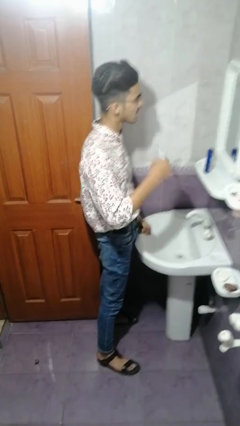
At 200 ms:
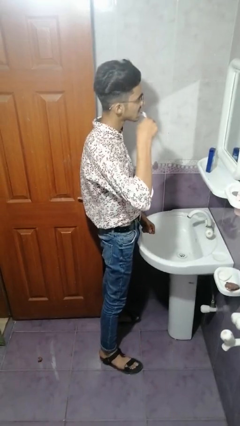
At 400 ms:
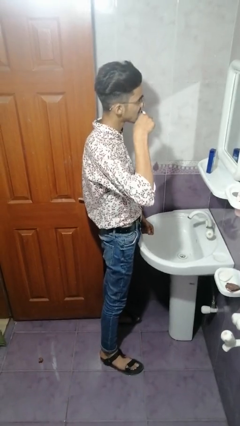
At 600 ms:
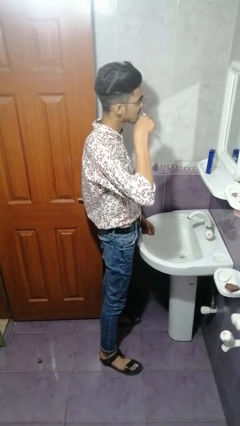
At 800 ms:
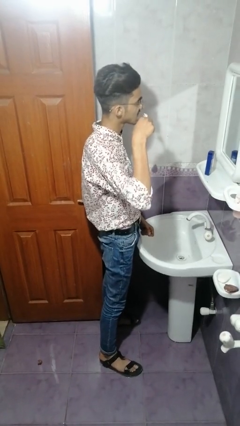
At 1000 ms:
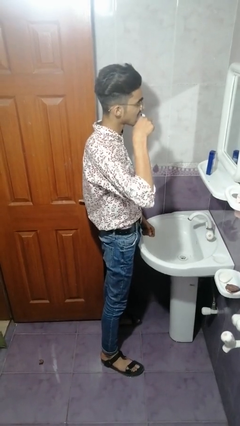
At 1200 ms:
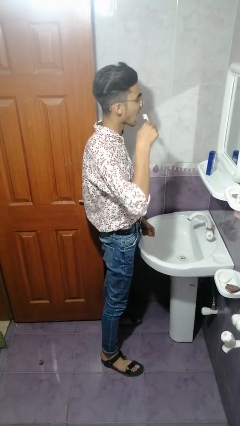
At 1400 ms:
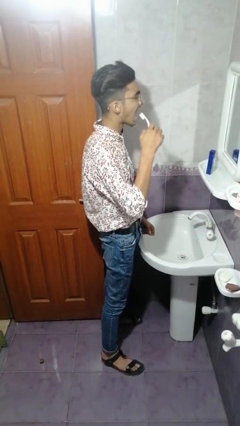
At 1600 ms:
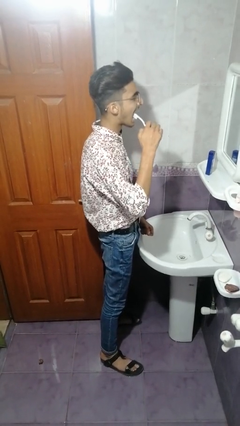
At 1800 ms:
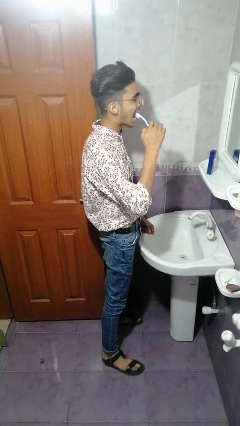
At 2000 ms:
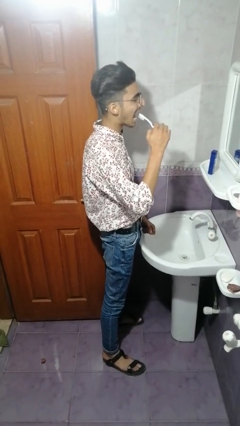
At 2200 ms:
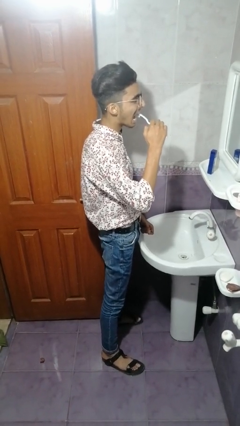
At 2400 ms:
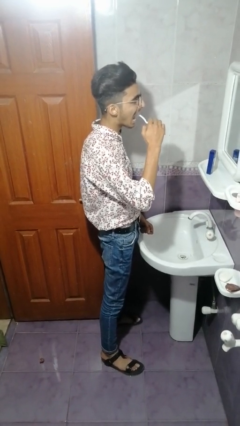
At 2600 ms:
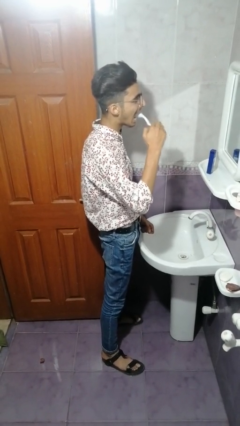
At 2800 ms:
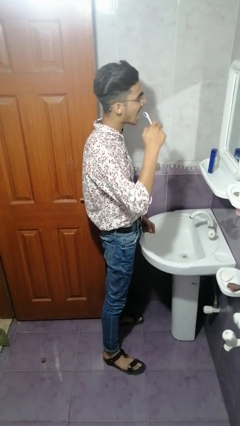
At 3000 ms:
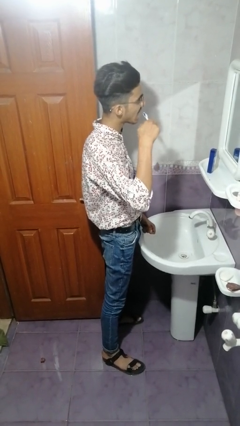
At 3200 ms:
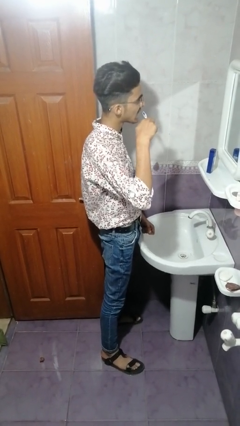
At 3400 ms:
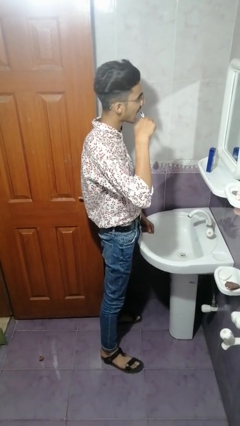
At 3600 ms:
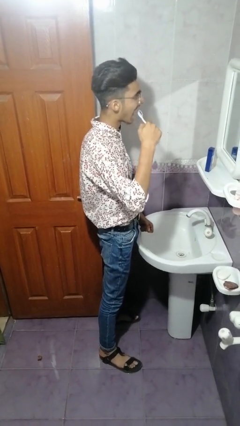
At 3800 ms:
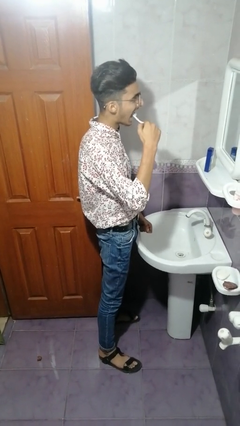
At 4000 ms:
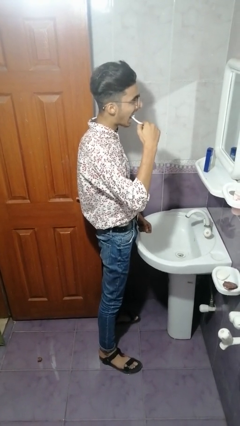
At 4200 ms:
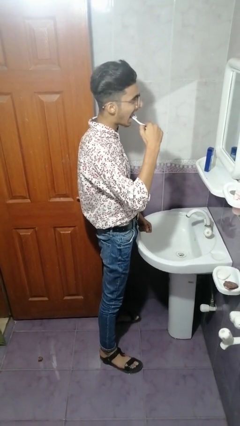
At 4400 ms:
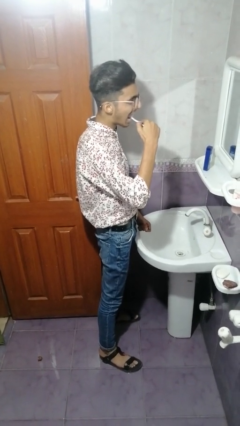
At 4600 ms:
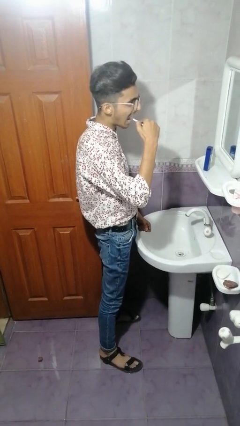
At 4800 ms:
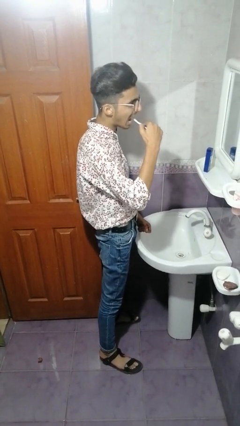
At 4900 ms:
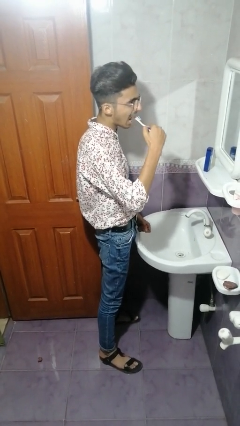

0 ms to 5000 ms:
person brushes teeth

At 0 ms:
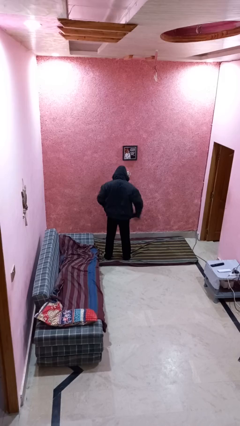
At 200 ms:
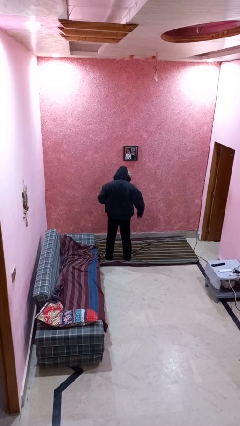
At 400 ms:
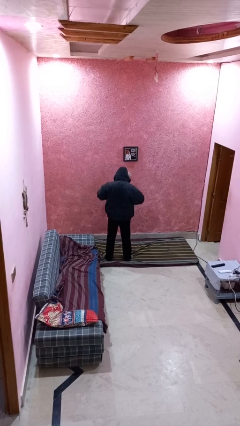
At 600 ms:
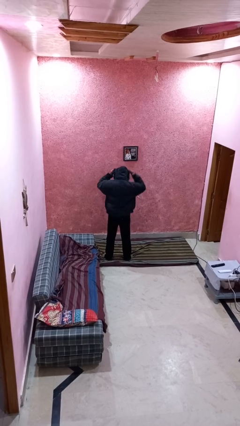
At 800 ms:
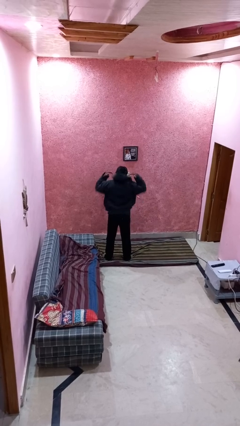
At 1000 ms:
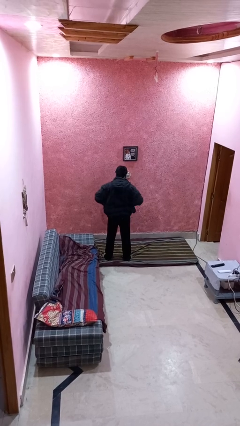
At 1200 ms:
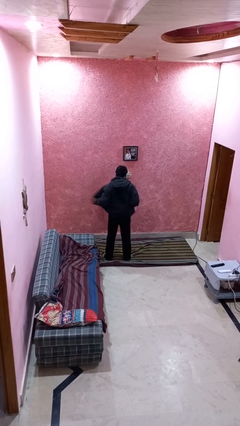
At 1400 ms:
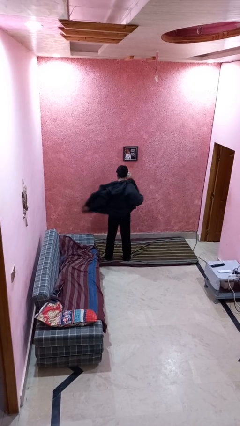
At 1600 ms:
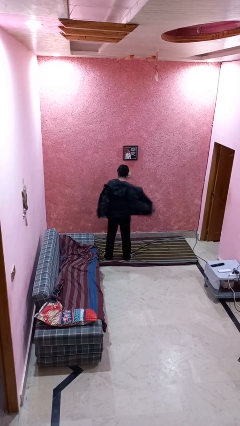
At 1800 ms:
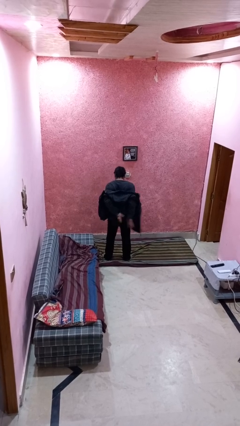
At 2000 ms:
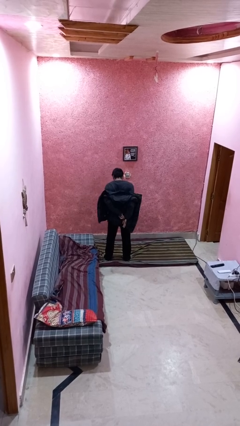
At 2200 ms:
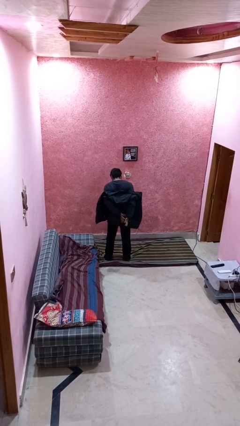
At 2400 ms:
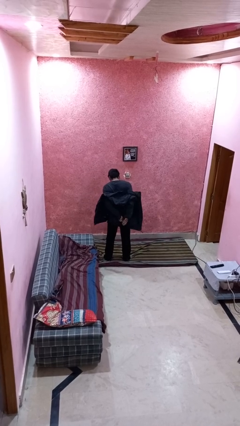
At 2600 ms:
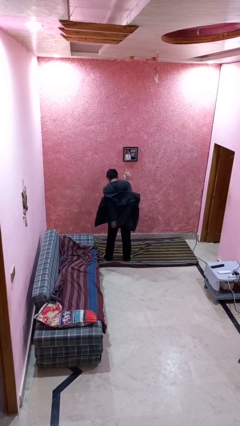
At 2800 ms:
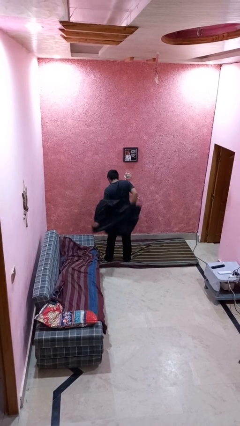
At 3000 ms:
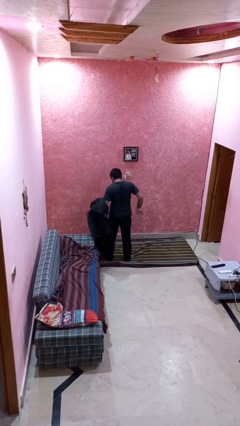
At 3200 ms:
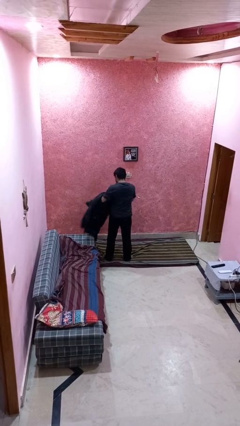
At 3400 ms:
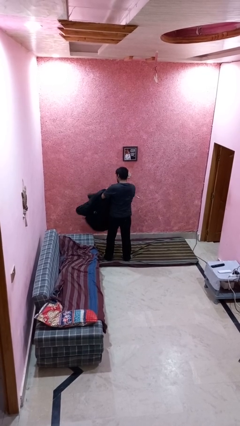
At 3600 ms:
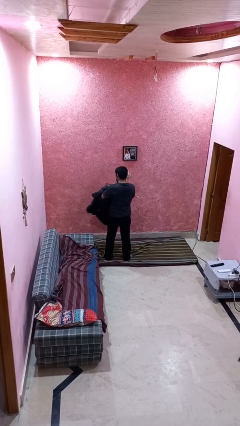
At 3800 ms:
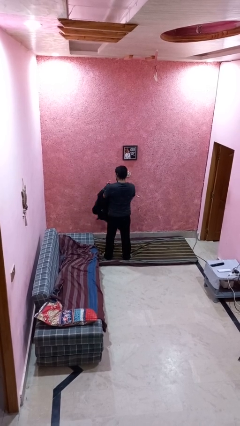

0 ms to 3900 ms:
person takes off hoodie

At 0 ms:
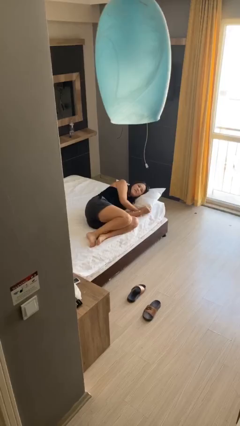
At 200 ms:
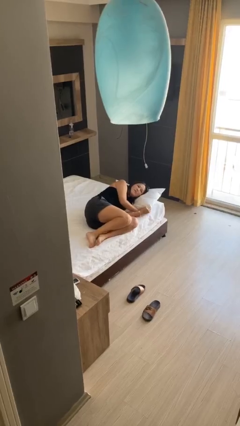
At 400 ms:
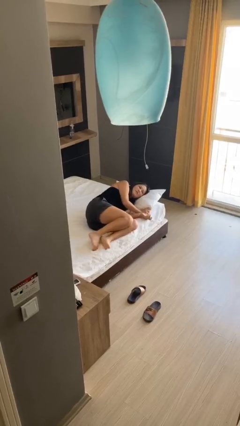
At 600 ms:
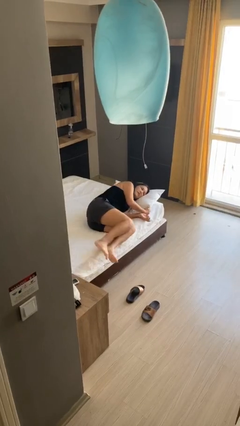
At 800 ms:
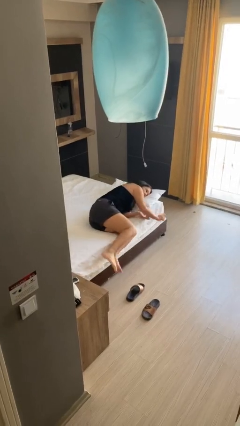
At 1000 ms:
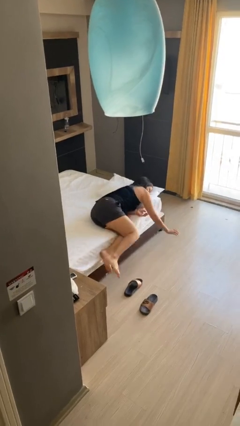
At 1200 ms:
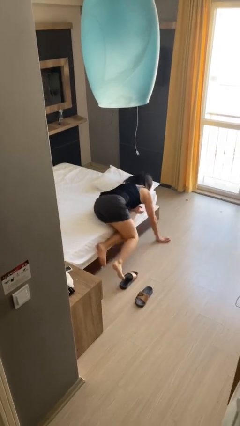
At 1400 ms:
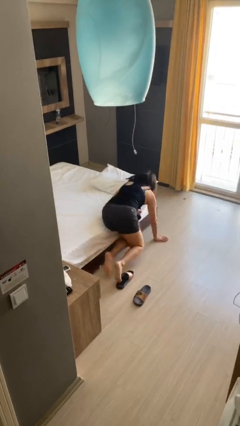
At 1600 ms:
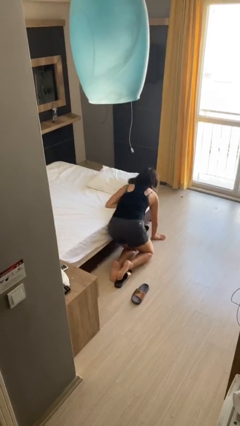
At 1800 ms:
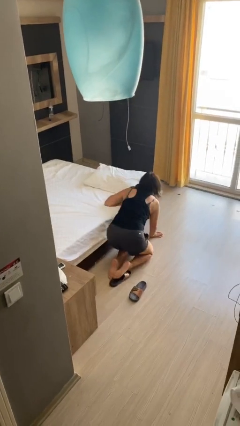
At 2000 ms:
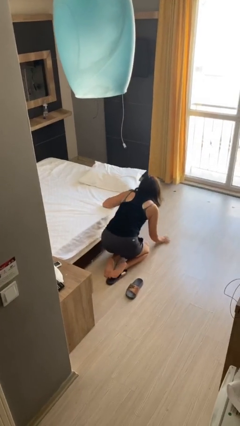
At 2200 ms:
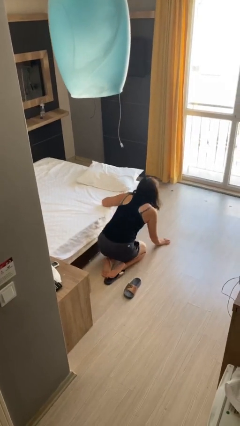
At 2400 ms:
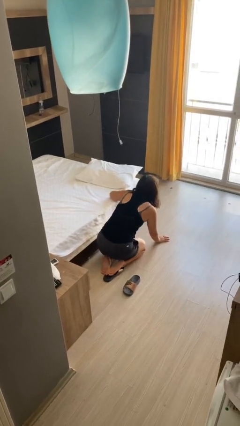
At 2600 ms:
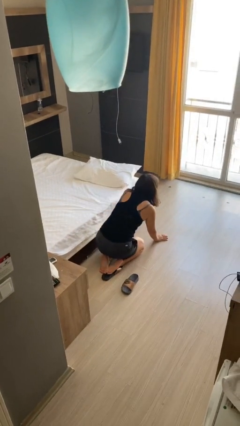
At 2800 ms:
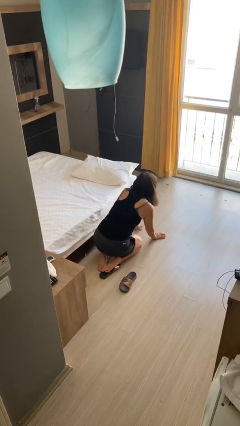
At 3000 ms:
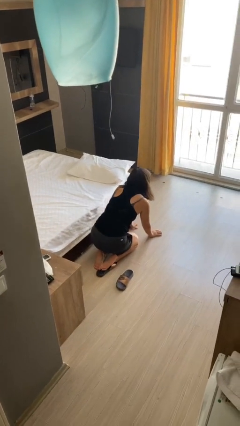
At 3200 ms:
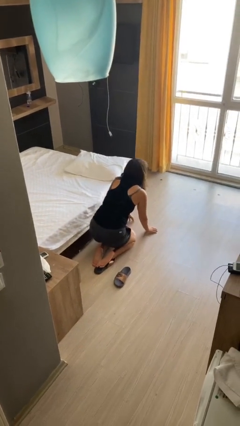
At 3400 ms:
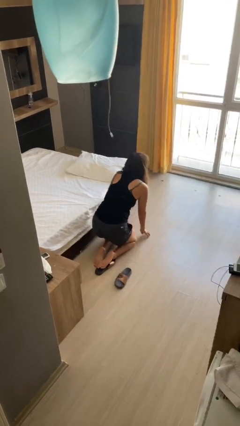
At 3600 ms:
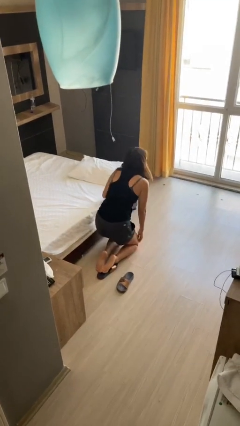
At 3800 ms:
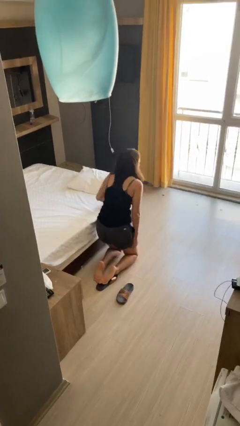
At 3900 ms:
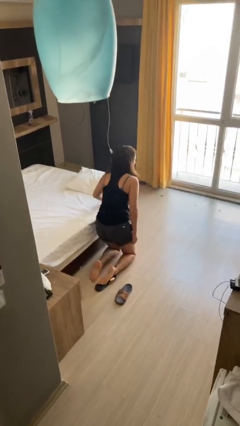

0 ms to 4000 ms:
person falls from bed

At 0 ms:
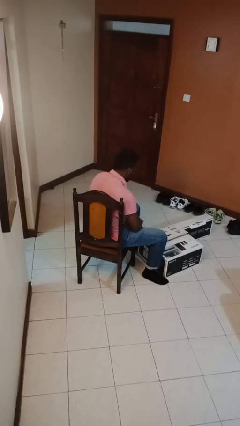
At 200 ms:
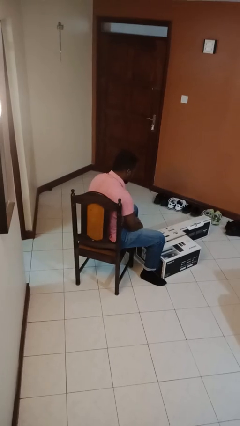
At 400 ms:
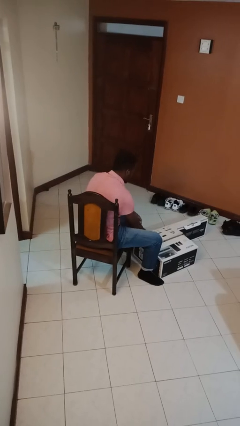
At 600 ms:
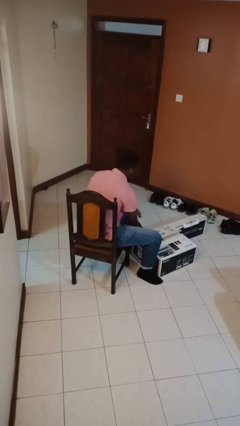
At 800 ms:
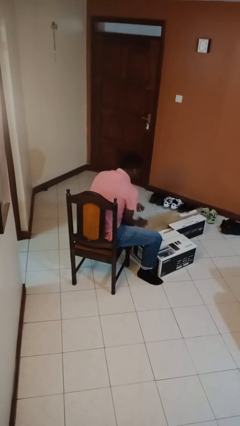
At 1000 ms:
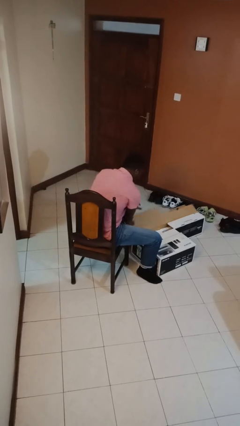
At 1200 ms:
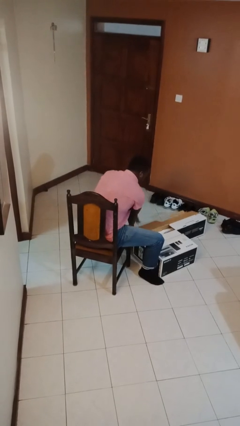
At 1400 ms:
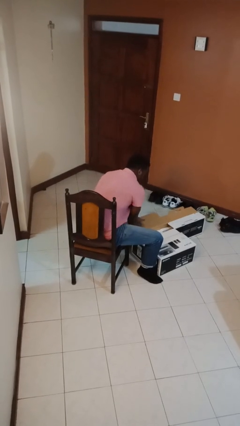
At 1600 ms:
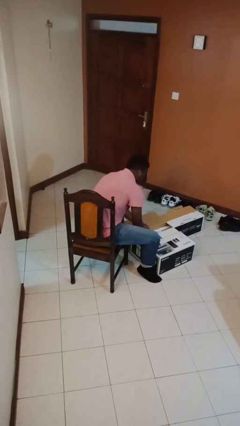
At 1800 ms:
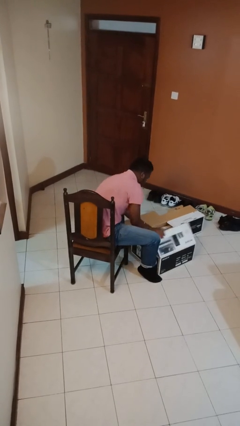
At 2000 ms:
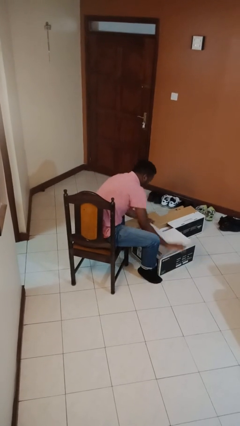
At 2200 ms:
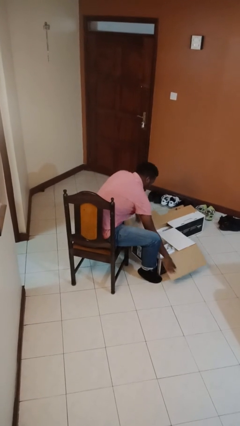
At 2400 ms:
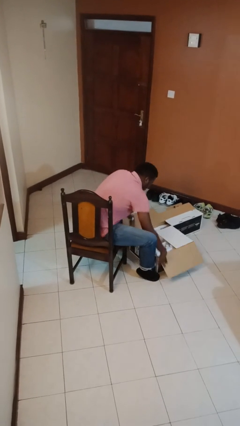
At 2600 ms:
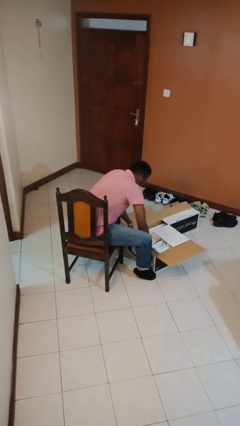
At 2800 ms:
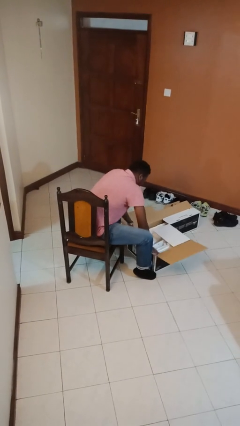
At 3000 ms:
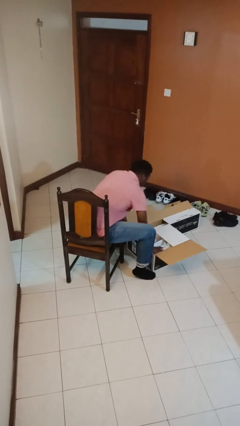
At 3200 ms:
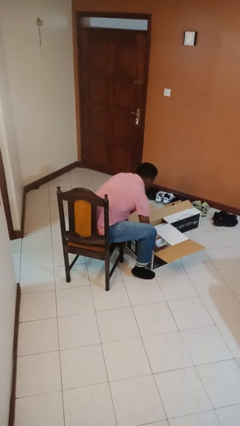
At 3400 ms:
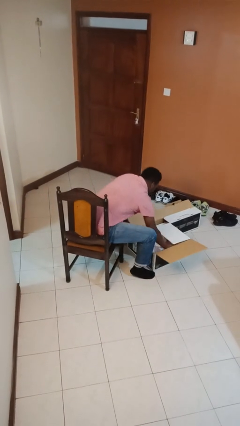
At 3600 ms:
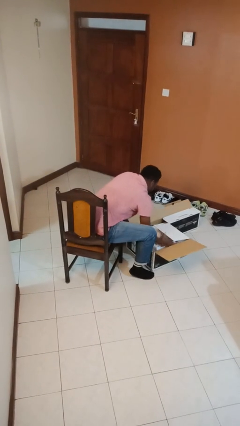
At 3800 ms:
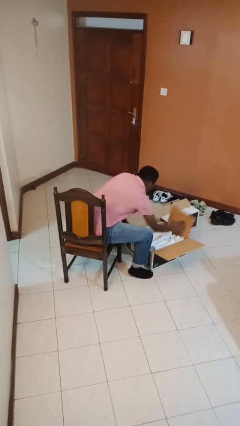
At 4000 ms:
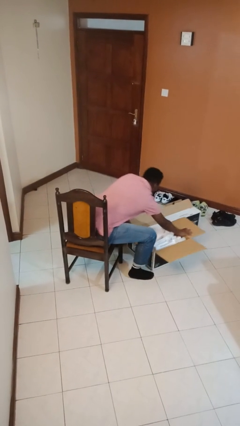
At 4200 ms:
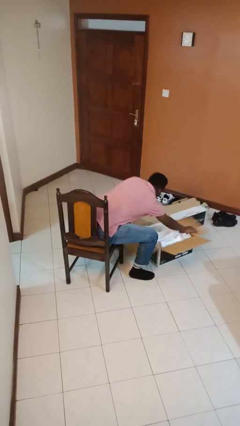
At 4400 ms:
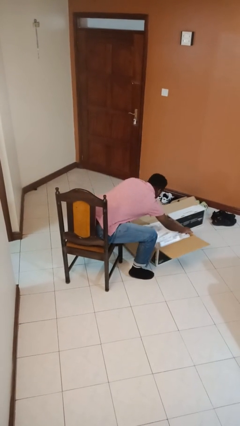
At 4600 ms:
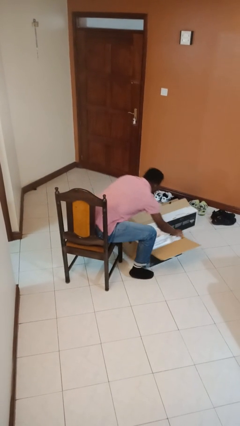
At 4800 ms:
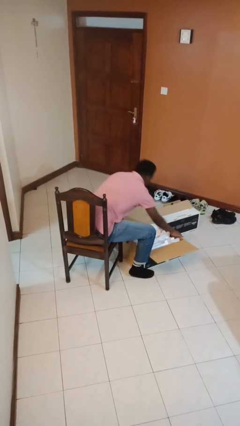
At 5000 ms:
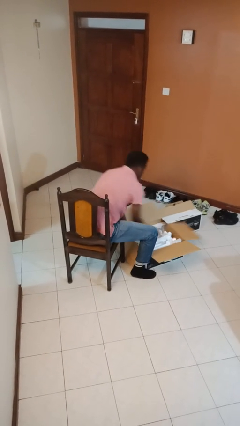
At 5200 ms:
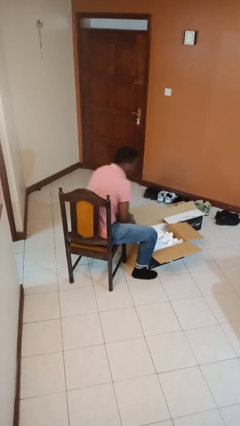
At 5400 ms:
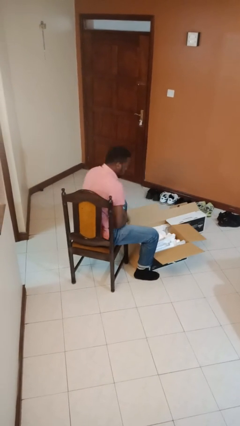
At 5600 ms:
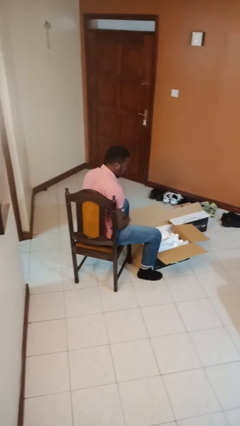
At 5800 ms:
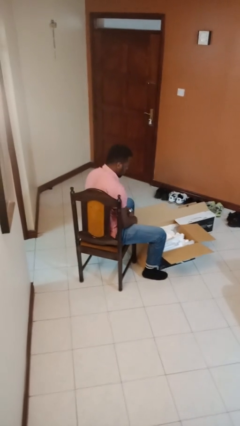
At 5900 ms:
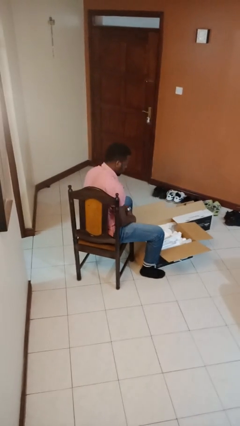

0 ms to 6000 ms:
person opens box
